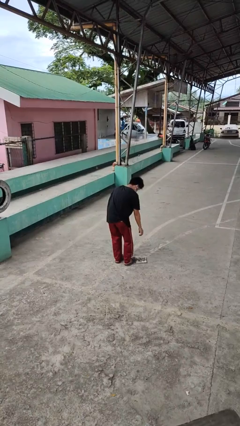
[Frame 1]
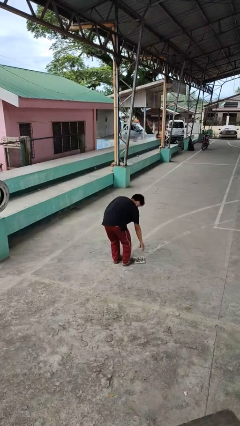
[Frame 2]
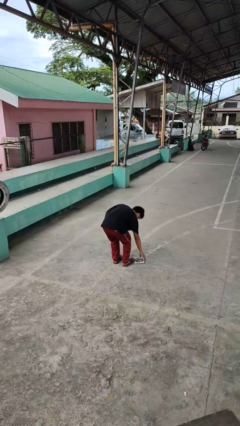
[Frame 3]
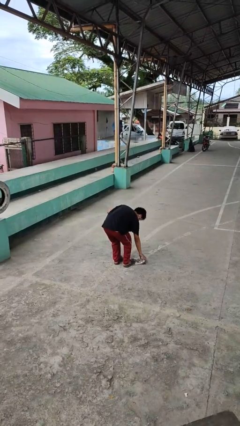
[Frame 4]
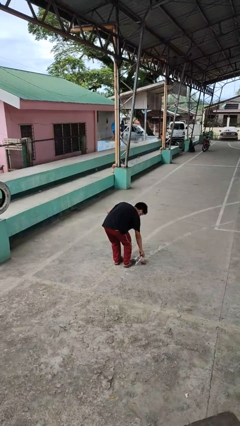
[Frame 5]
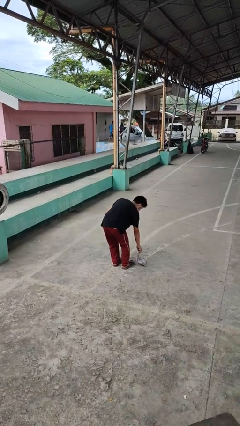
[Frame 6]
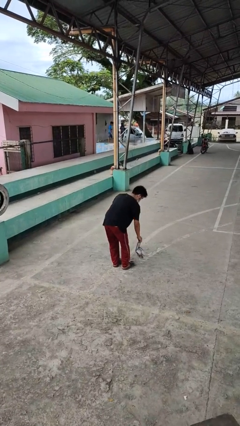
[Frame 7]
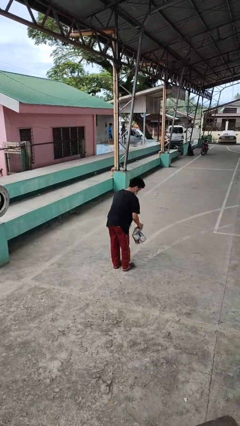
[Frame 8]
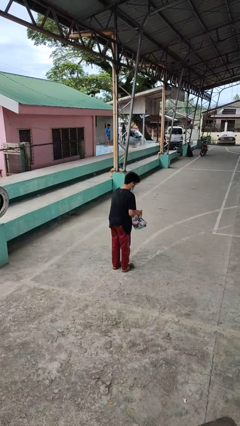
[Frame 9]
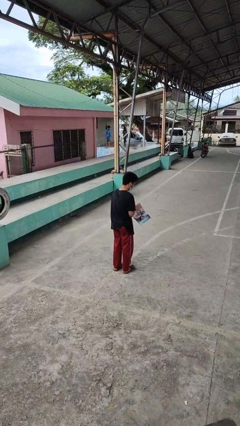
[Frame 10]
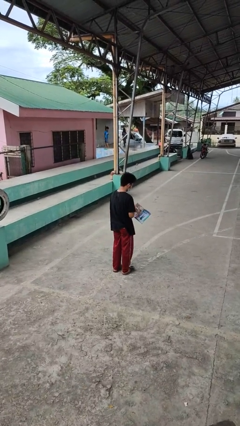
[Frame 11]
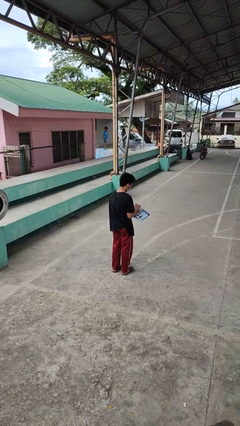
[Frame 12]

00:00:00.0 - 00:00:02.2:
person picks up object from floor

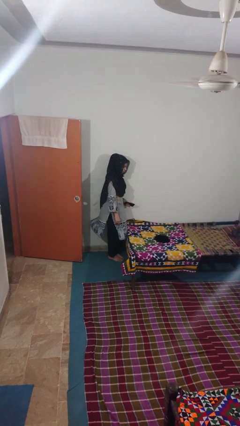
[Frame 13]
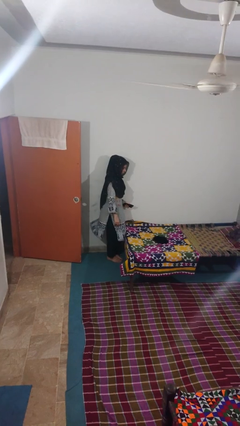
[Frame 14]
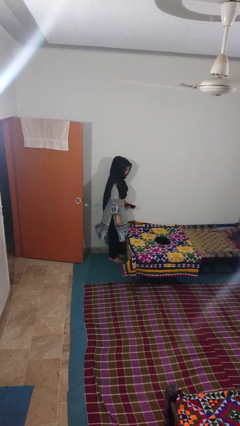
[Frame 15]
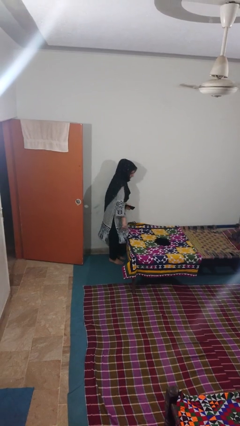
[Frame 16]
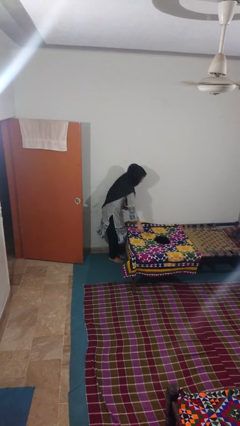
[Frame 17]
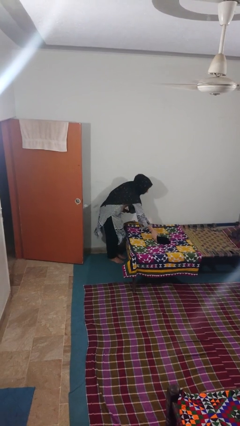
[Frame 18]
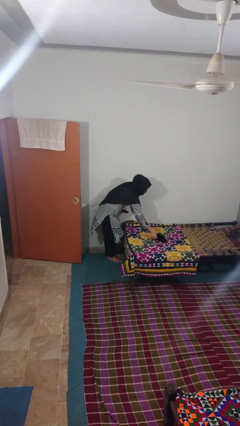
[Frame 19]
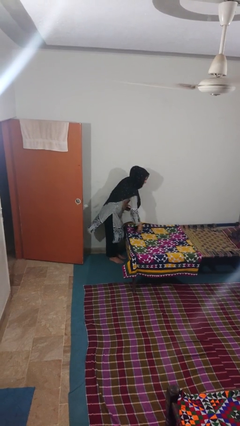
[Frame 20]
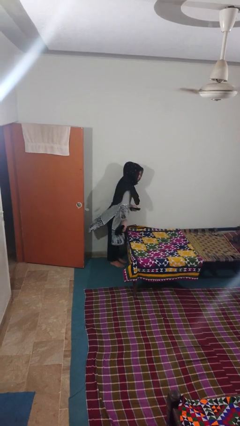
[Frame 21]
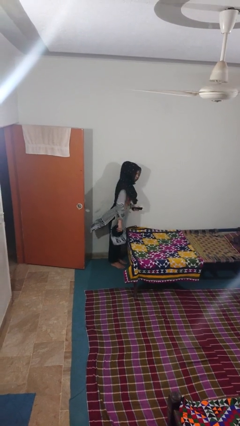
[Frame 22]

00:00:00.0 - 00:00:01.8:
person picks up object from bed

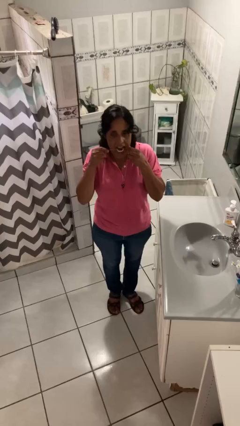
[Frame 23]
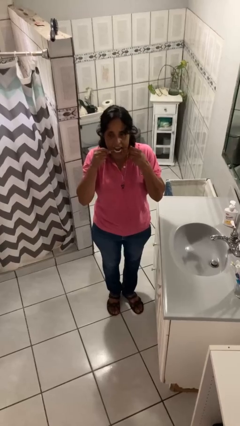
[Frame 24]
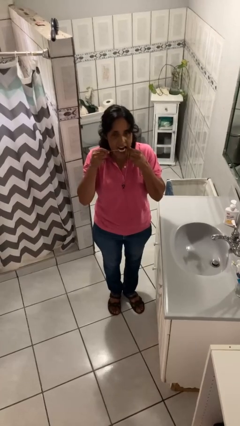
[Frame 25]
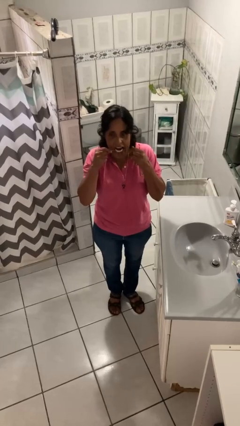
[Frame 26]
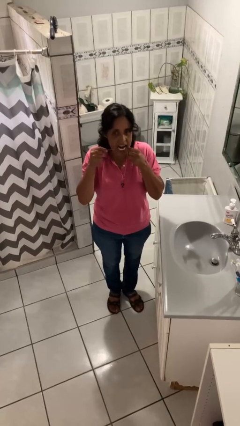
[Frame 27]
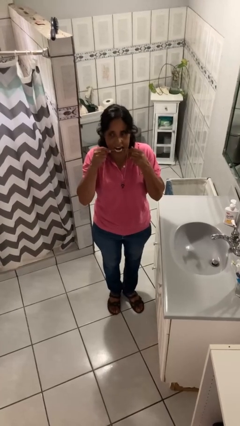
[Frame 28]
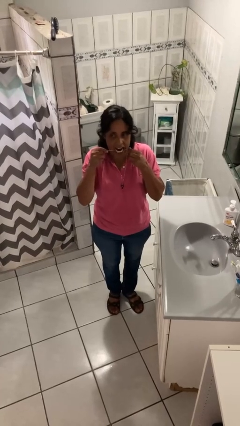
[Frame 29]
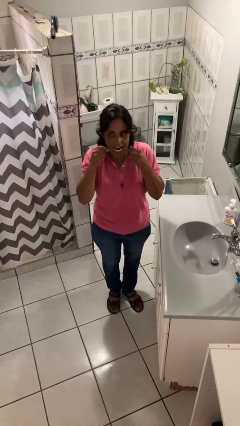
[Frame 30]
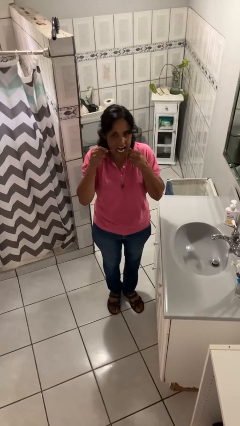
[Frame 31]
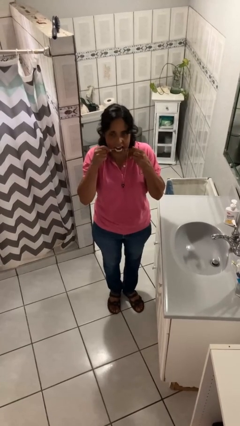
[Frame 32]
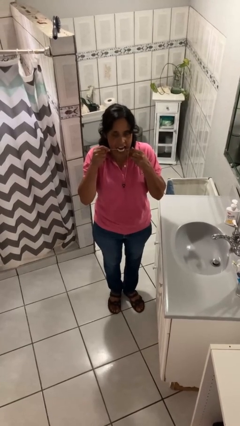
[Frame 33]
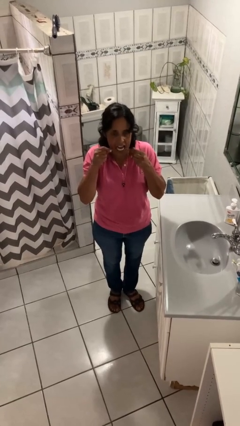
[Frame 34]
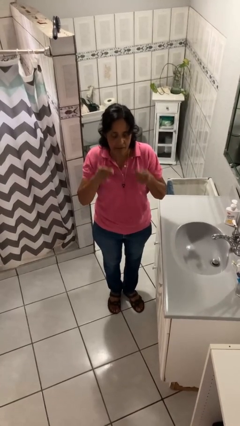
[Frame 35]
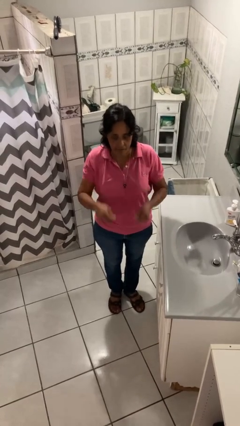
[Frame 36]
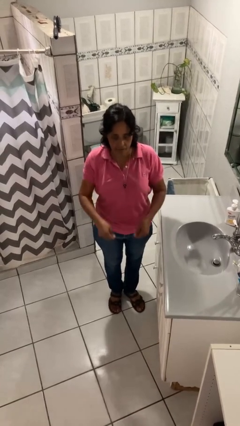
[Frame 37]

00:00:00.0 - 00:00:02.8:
person flosses

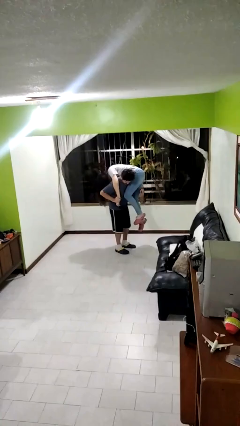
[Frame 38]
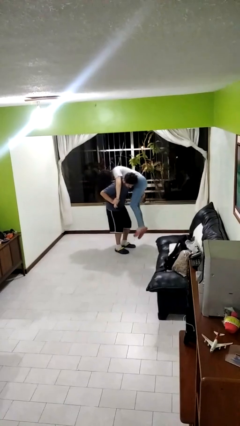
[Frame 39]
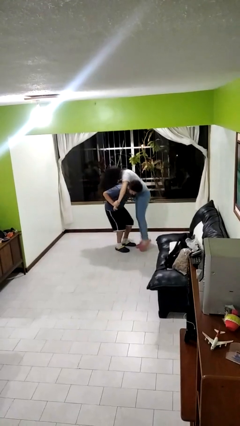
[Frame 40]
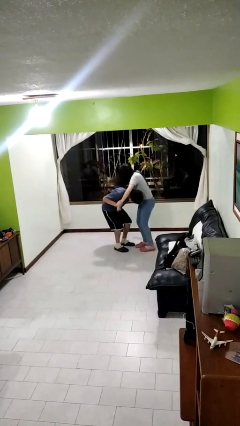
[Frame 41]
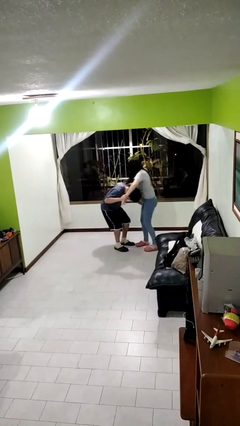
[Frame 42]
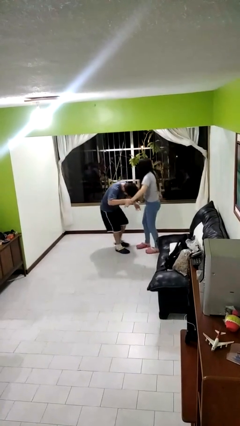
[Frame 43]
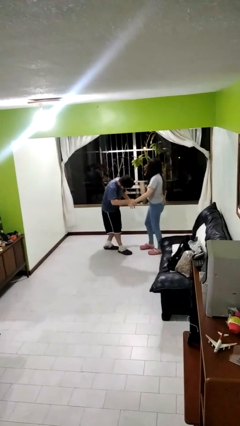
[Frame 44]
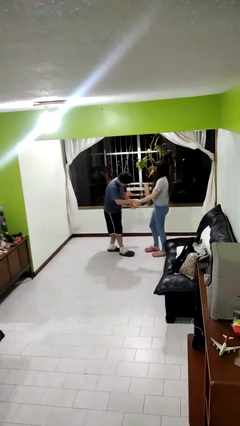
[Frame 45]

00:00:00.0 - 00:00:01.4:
person puts down person

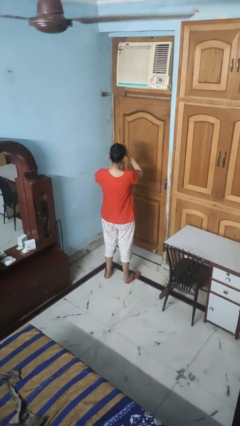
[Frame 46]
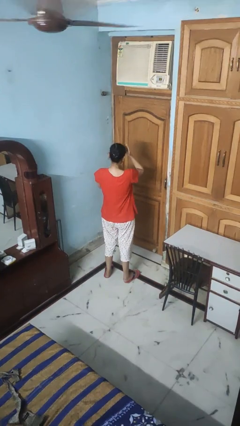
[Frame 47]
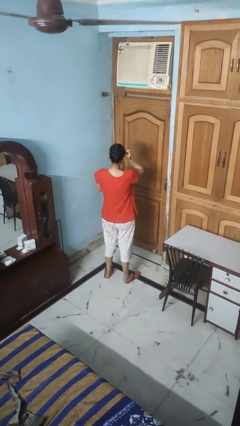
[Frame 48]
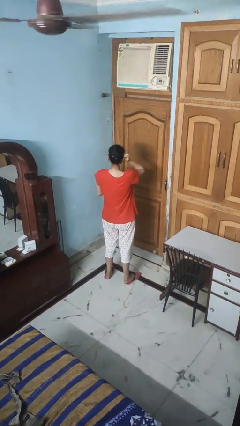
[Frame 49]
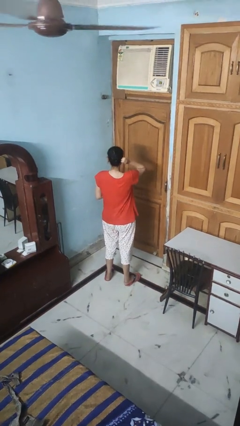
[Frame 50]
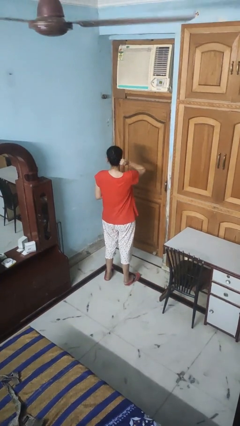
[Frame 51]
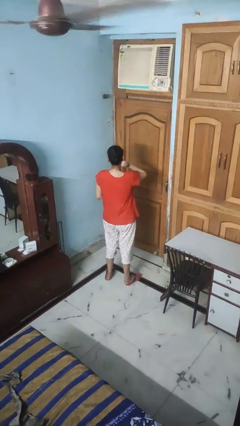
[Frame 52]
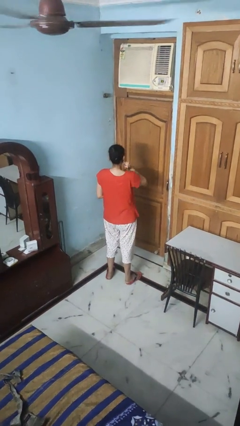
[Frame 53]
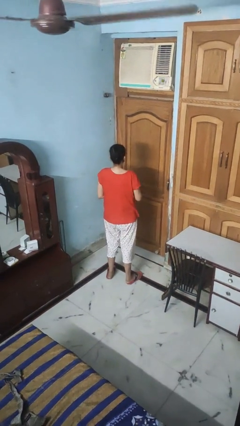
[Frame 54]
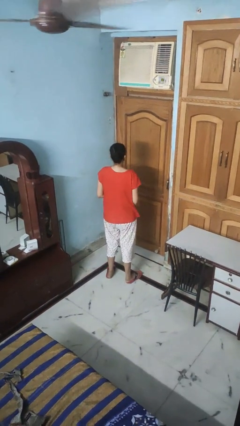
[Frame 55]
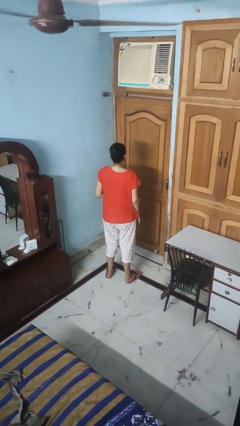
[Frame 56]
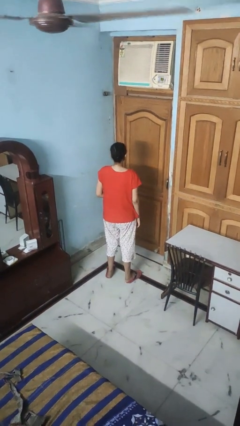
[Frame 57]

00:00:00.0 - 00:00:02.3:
person strokes hair

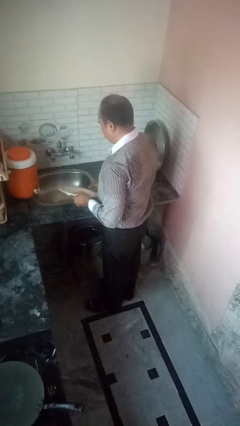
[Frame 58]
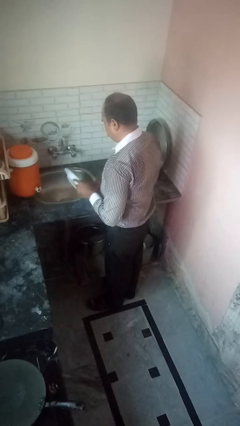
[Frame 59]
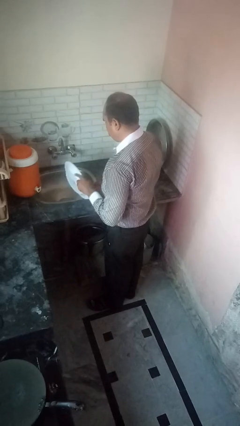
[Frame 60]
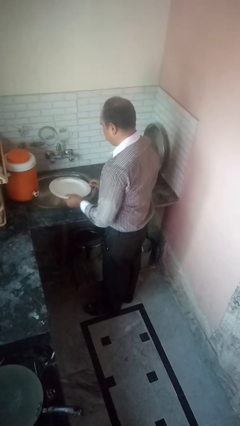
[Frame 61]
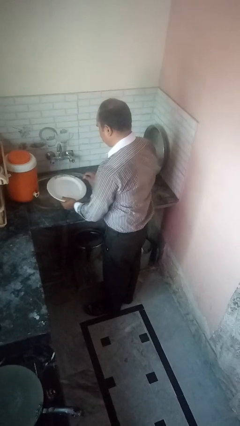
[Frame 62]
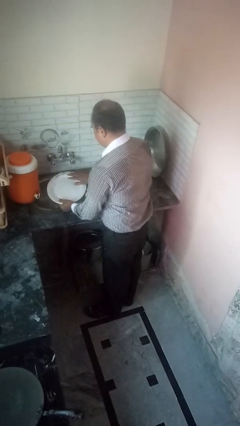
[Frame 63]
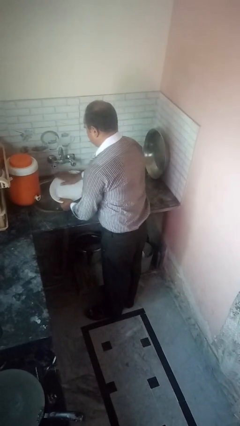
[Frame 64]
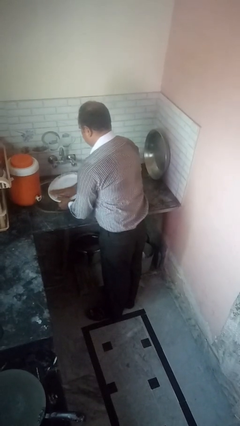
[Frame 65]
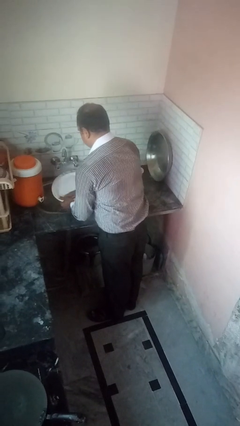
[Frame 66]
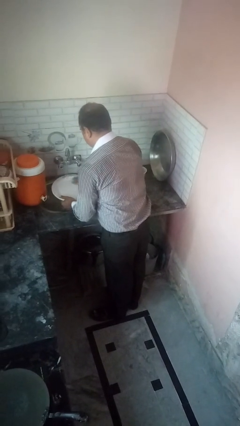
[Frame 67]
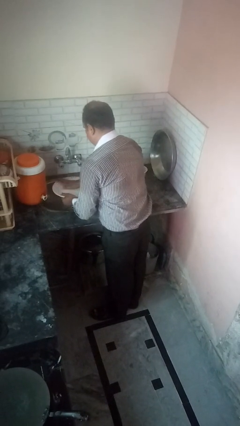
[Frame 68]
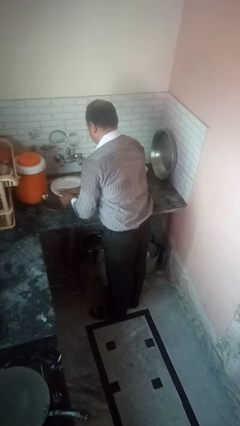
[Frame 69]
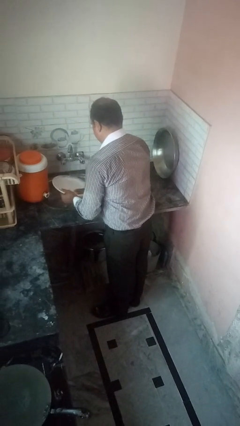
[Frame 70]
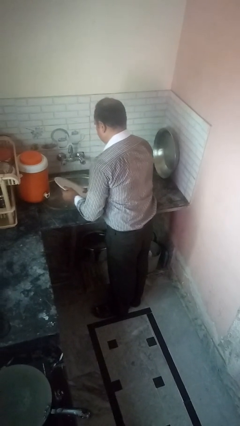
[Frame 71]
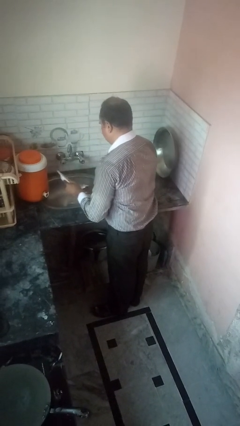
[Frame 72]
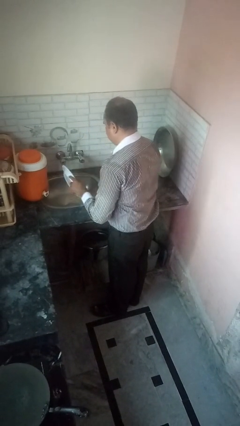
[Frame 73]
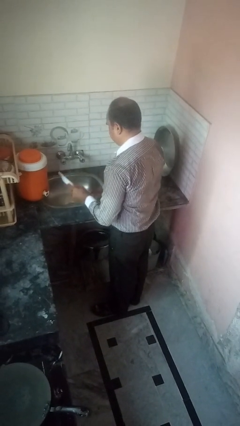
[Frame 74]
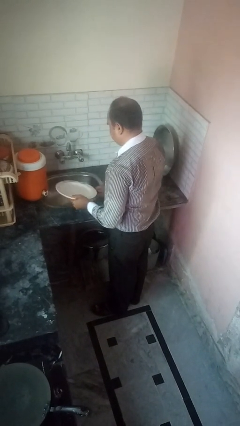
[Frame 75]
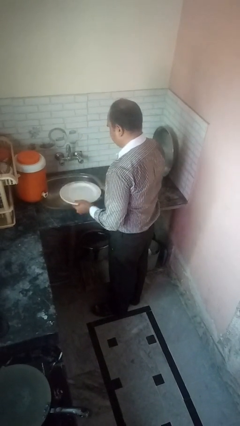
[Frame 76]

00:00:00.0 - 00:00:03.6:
person washes dish

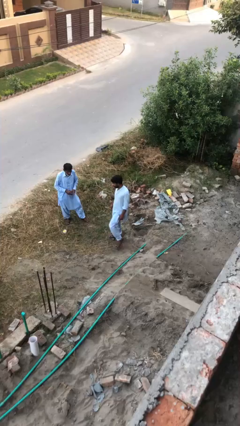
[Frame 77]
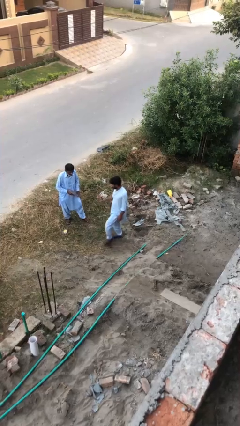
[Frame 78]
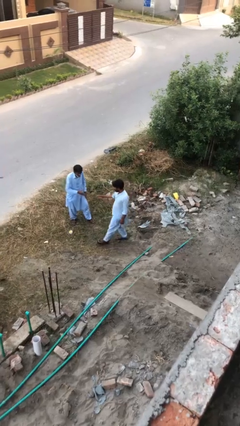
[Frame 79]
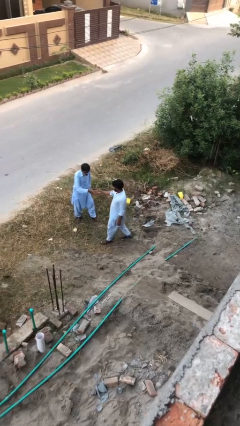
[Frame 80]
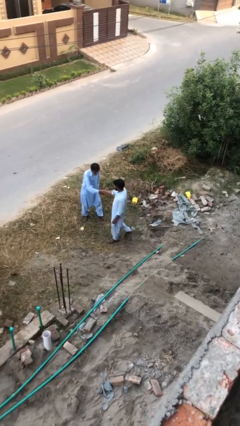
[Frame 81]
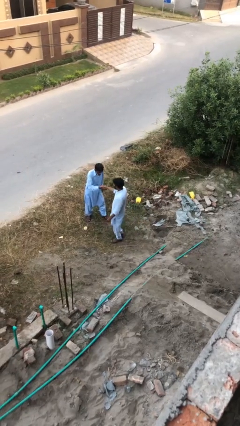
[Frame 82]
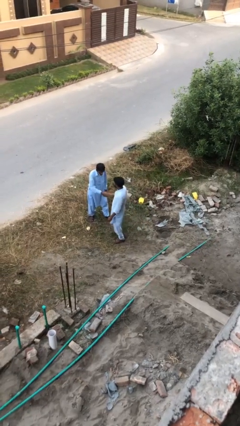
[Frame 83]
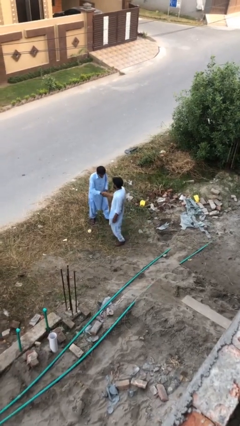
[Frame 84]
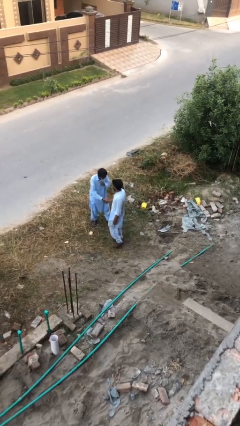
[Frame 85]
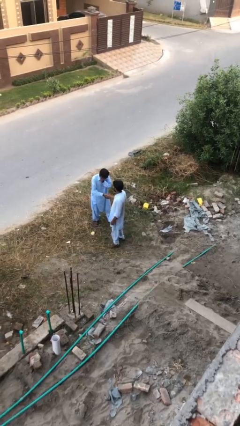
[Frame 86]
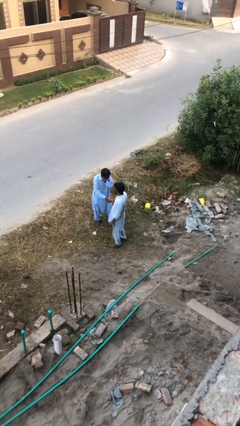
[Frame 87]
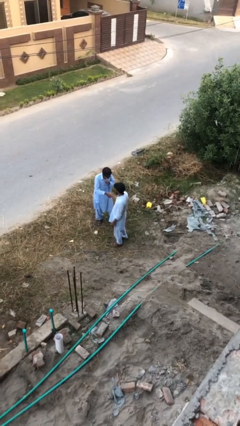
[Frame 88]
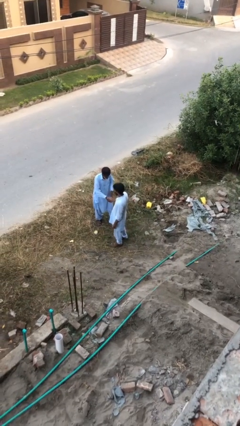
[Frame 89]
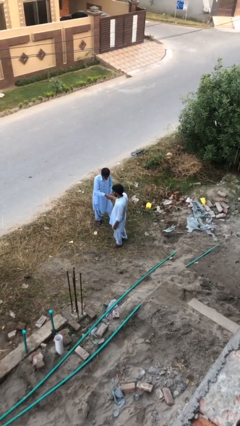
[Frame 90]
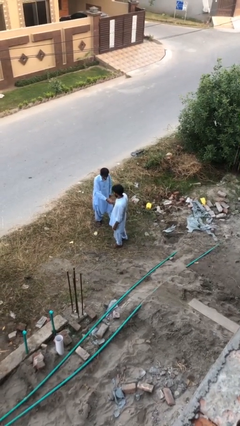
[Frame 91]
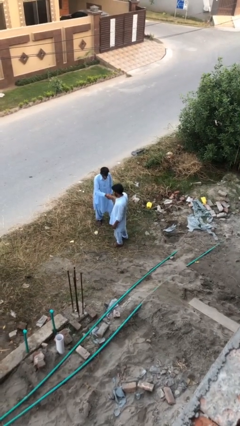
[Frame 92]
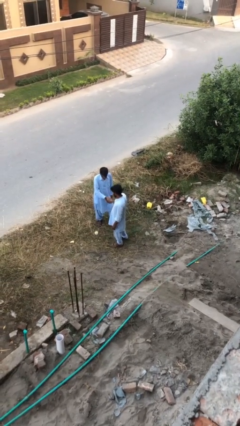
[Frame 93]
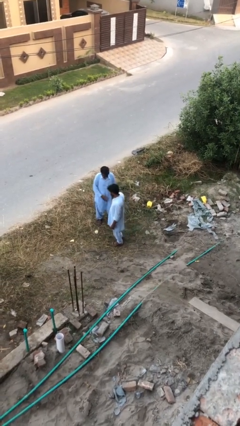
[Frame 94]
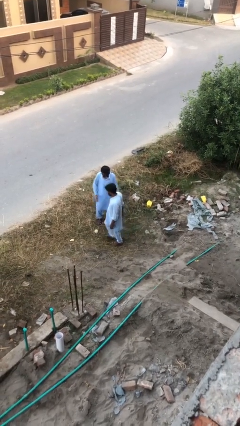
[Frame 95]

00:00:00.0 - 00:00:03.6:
person shakes hand
